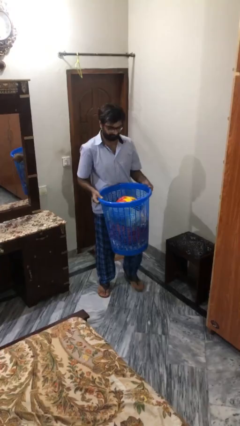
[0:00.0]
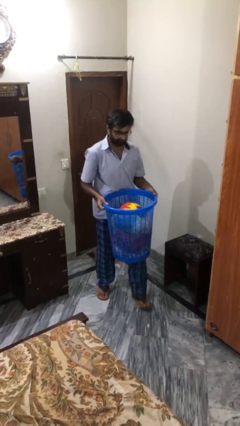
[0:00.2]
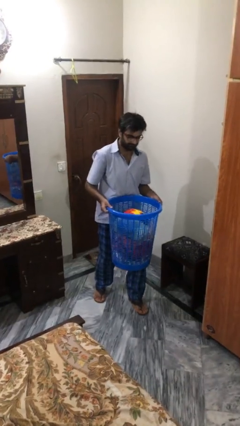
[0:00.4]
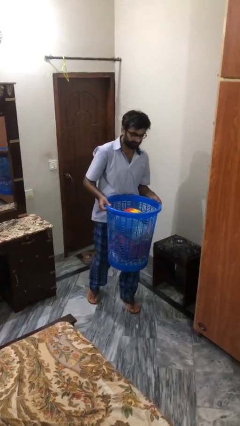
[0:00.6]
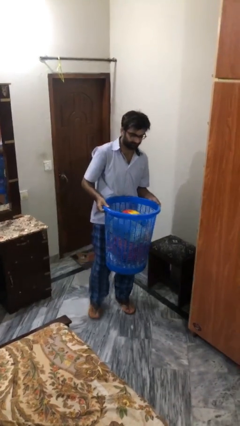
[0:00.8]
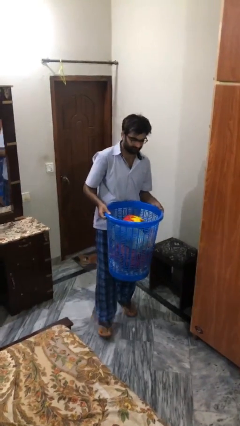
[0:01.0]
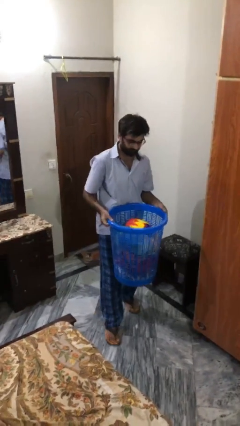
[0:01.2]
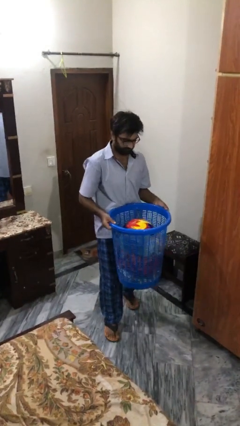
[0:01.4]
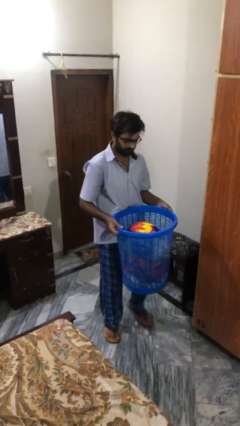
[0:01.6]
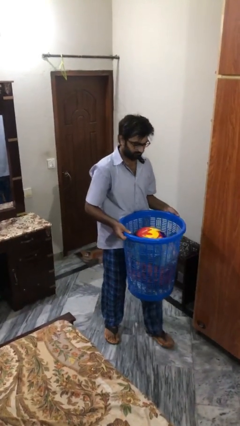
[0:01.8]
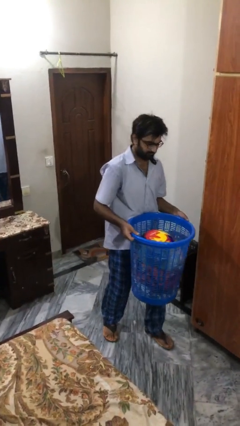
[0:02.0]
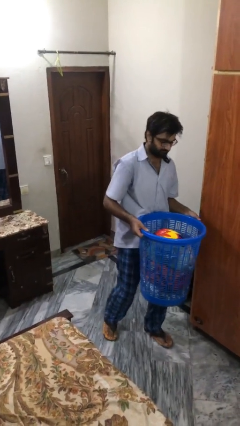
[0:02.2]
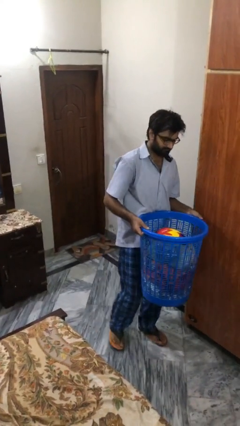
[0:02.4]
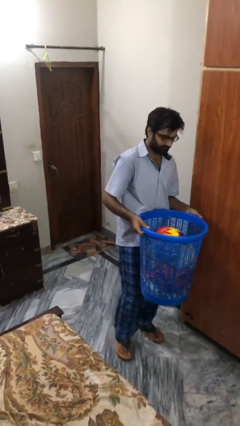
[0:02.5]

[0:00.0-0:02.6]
person carries heavy object

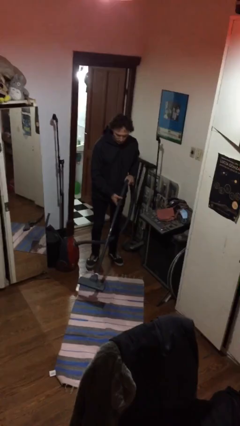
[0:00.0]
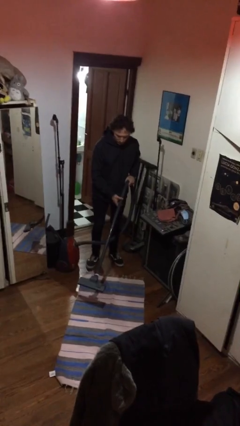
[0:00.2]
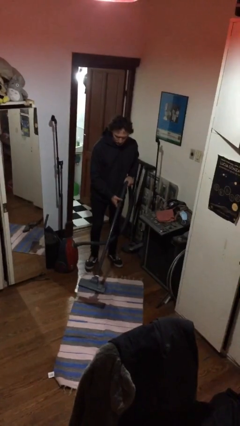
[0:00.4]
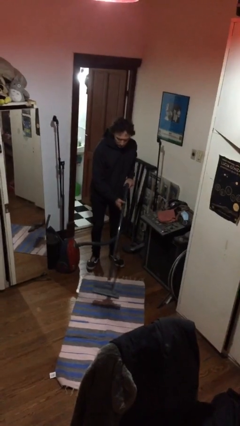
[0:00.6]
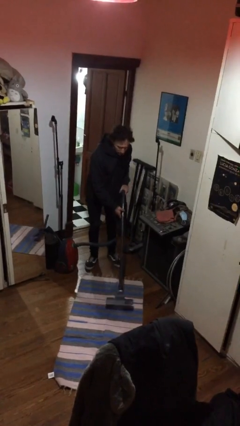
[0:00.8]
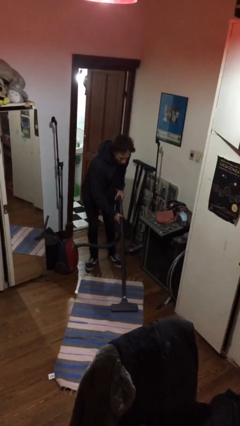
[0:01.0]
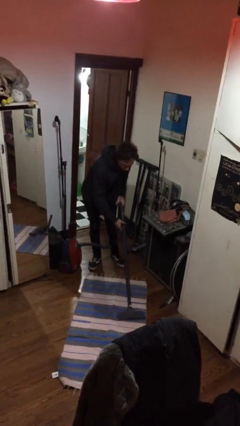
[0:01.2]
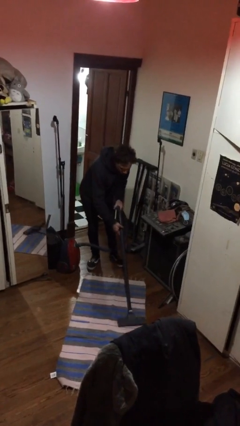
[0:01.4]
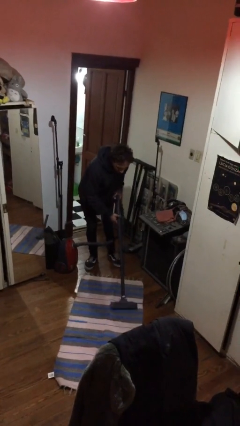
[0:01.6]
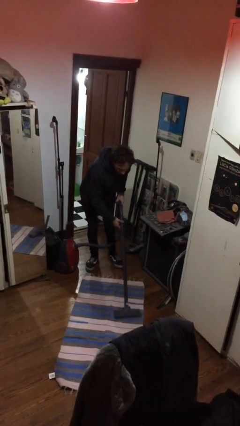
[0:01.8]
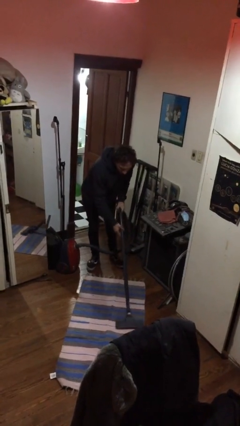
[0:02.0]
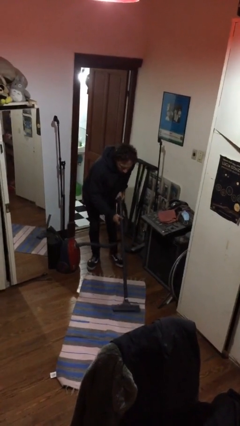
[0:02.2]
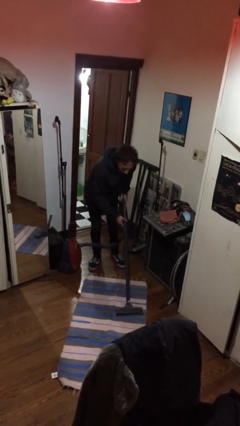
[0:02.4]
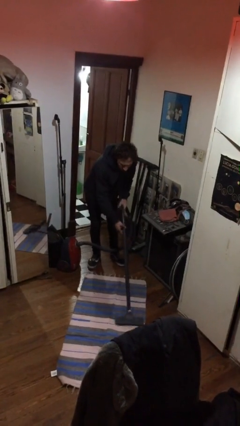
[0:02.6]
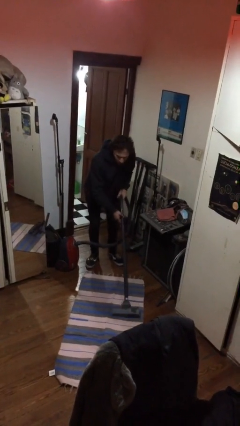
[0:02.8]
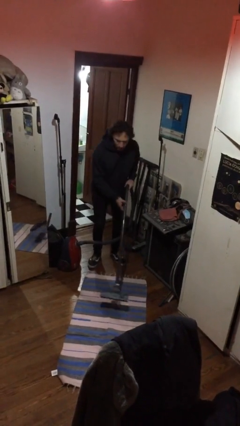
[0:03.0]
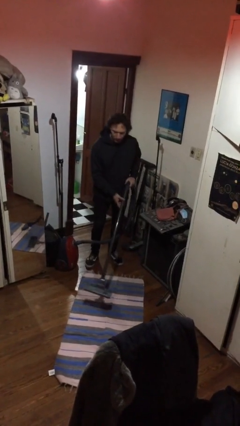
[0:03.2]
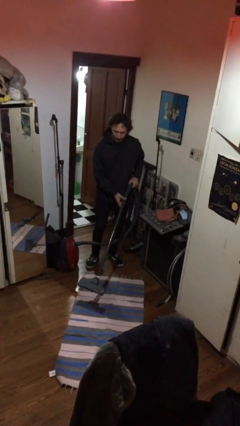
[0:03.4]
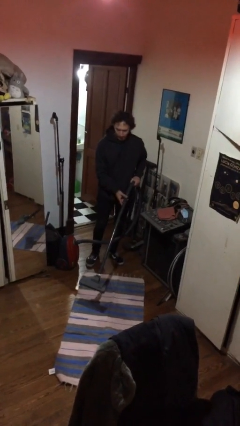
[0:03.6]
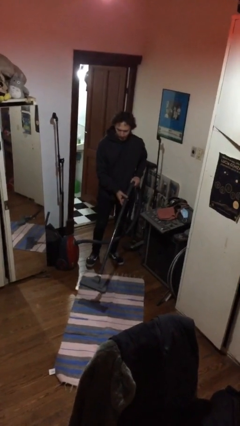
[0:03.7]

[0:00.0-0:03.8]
person vacuums carpet

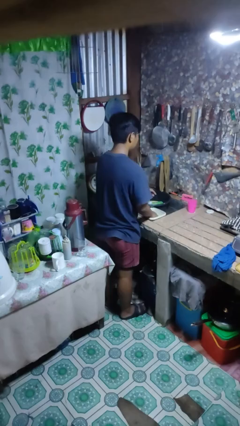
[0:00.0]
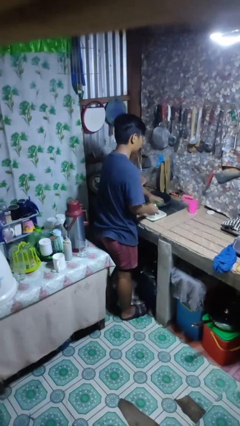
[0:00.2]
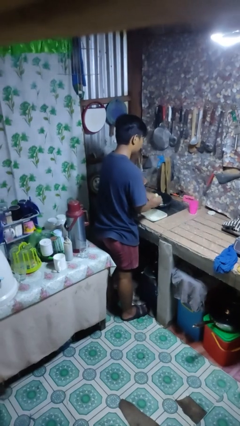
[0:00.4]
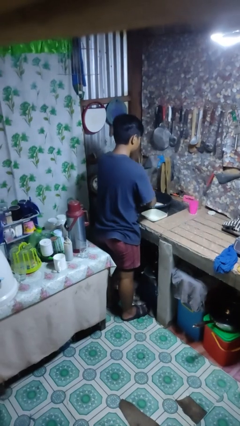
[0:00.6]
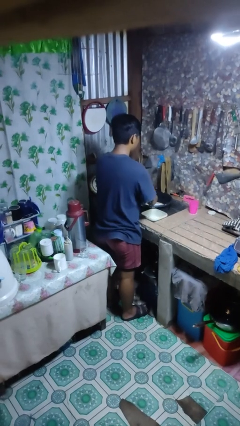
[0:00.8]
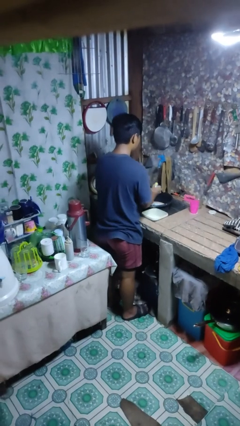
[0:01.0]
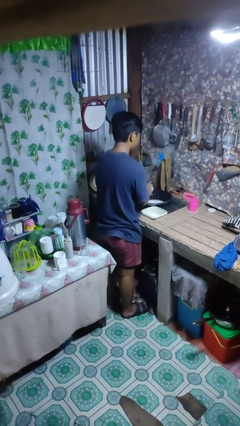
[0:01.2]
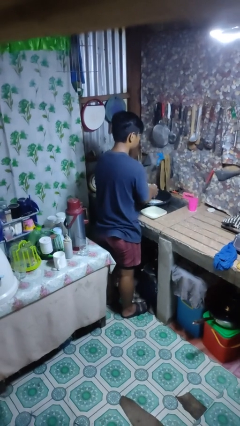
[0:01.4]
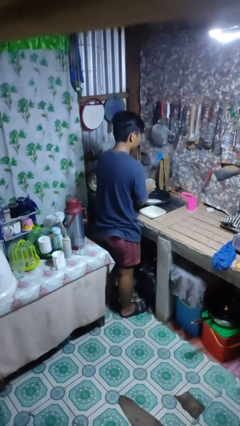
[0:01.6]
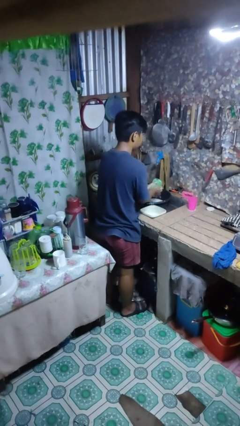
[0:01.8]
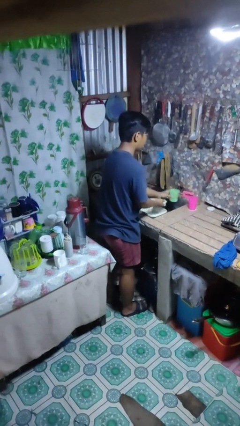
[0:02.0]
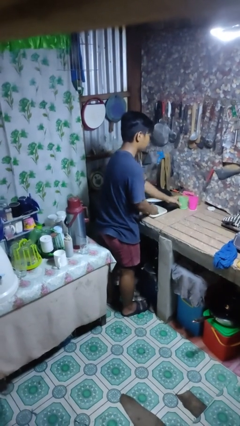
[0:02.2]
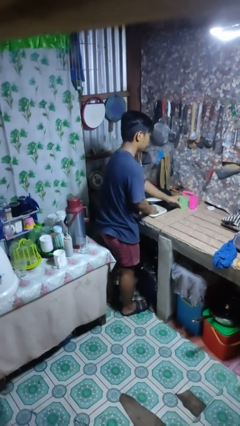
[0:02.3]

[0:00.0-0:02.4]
person washes dish

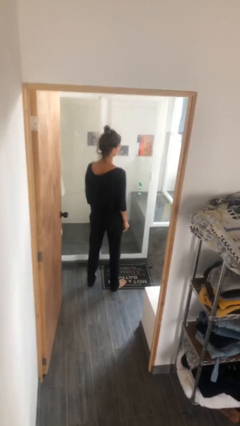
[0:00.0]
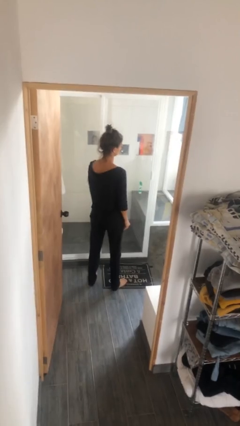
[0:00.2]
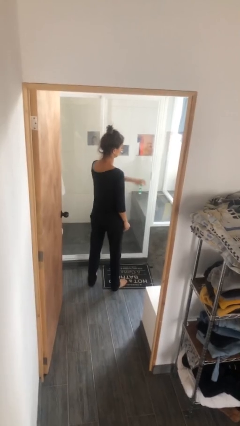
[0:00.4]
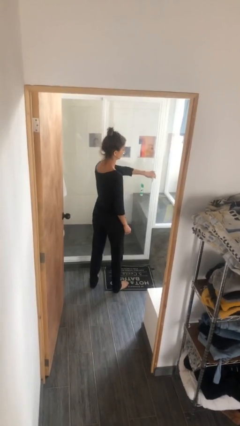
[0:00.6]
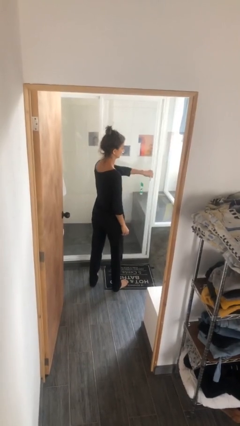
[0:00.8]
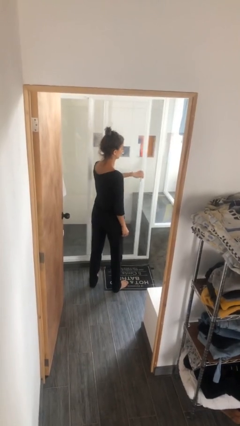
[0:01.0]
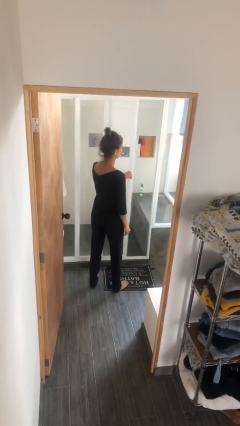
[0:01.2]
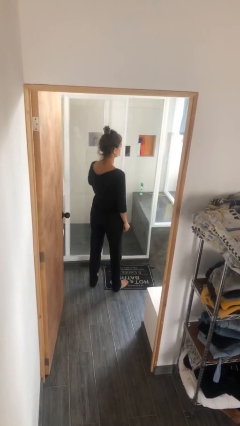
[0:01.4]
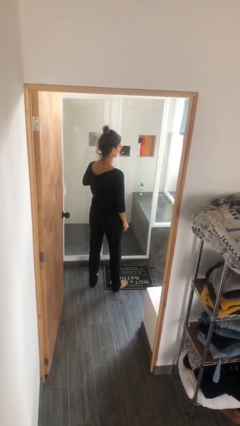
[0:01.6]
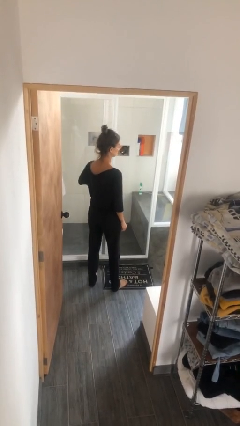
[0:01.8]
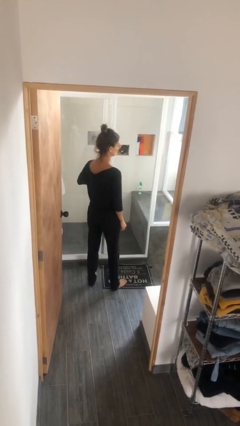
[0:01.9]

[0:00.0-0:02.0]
person opens sliding door

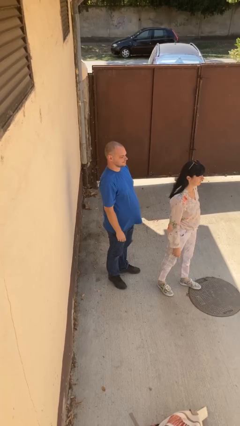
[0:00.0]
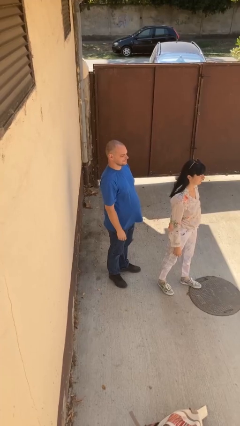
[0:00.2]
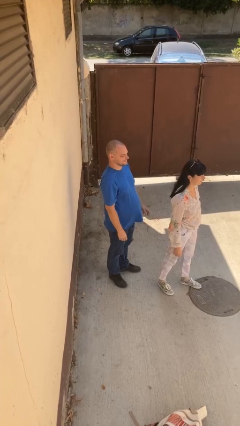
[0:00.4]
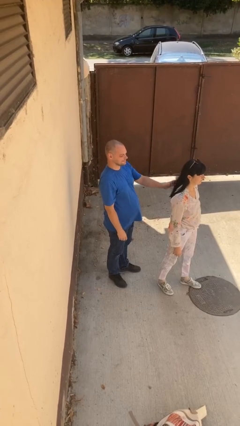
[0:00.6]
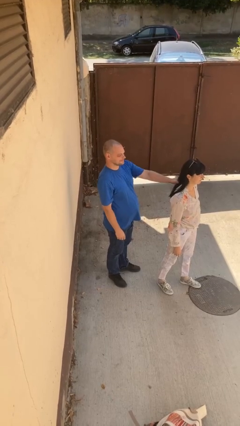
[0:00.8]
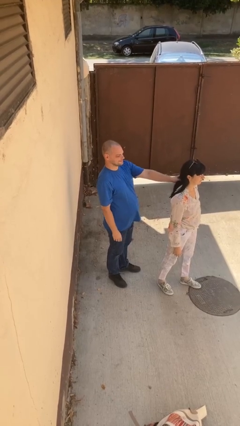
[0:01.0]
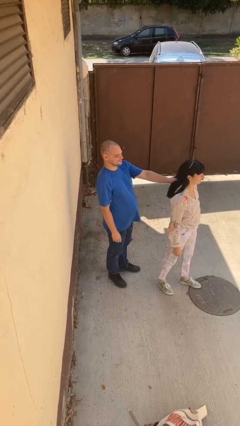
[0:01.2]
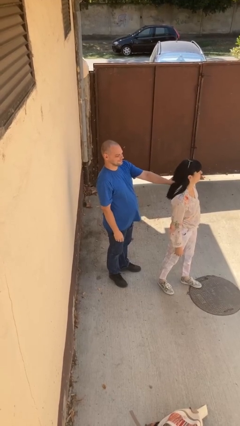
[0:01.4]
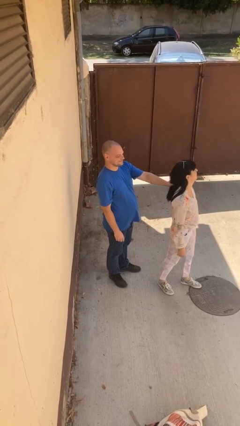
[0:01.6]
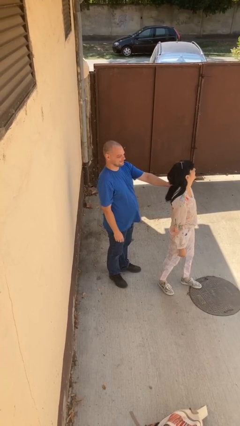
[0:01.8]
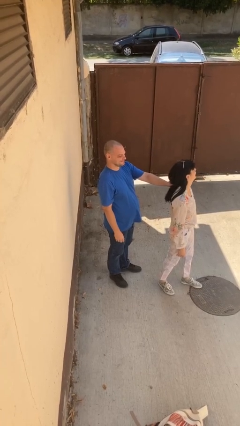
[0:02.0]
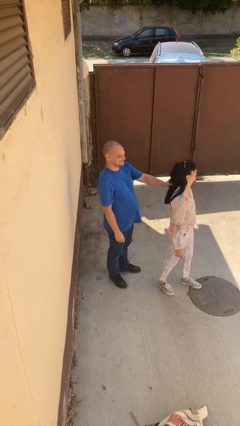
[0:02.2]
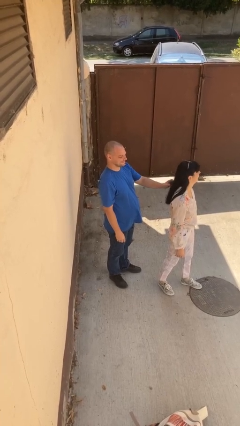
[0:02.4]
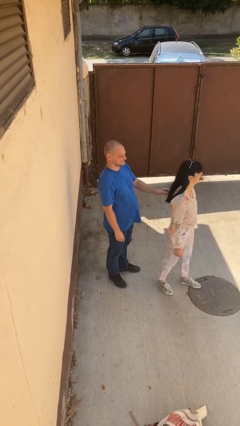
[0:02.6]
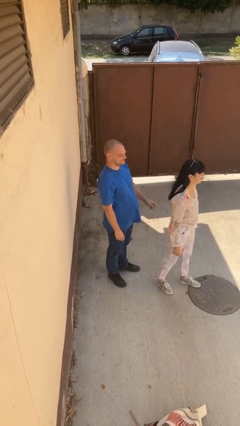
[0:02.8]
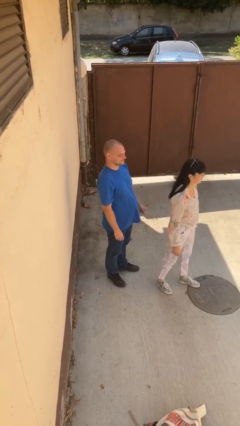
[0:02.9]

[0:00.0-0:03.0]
person grabs person by hair

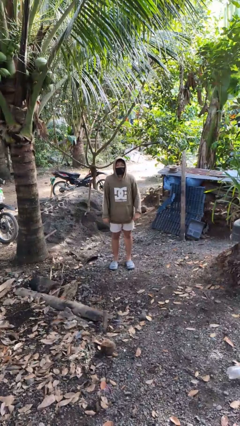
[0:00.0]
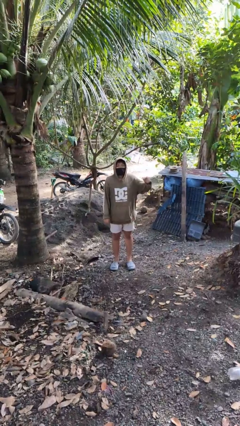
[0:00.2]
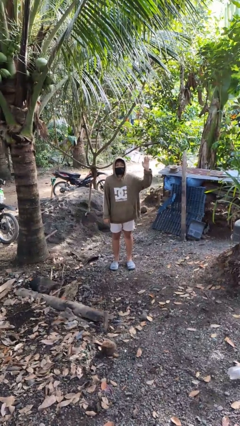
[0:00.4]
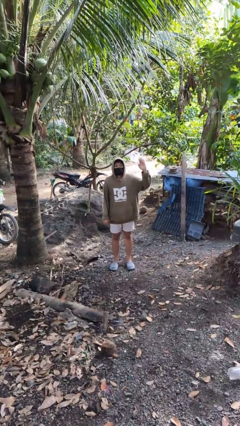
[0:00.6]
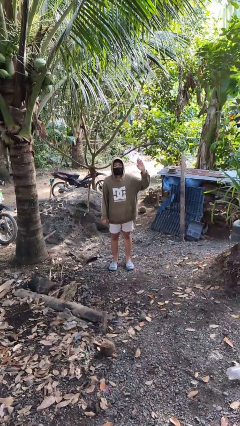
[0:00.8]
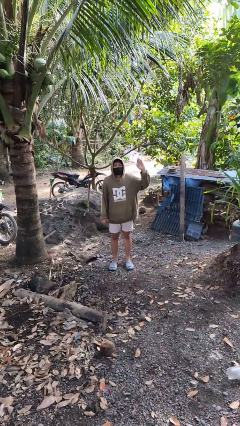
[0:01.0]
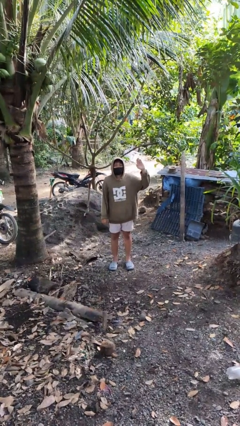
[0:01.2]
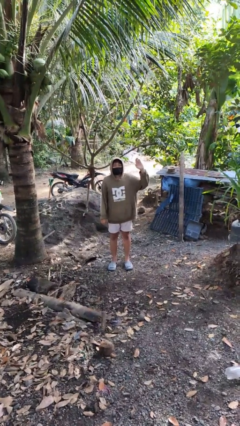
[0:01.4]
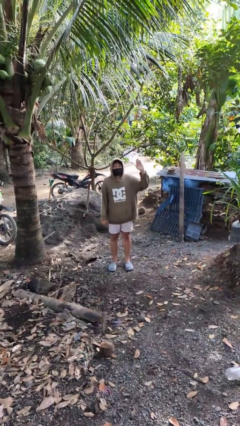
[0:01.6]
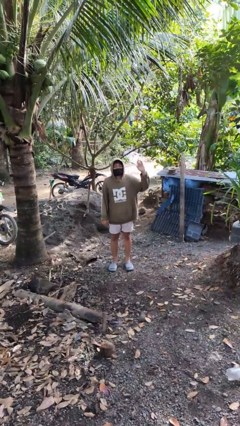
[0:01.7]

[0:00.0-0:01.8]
person gestures number five

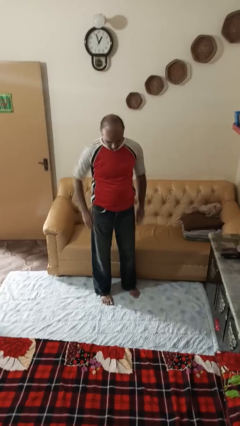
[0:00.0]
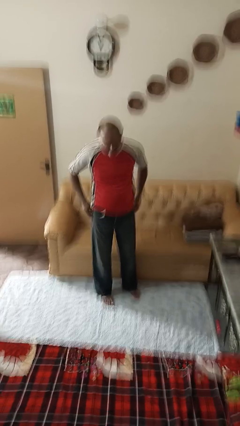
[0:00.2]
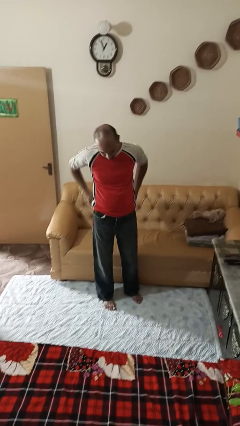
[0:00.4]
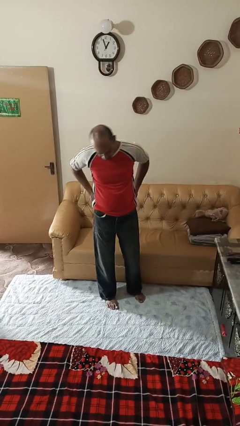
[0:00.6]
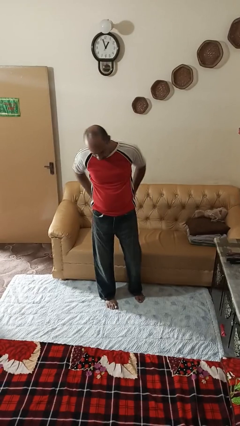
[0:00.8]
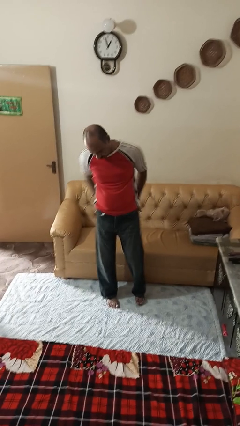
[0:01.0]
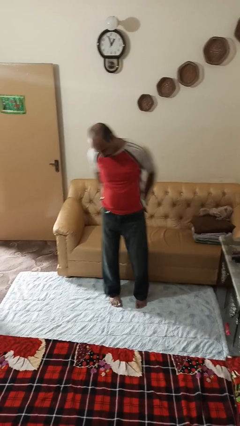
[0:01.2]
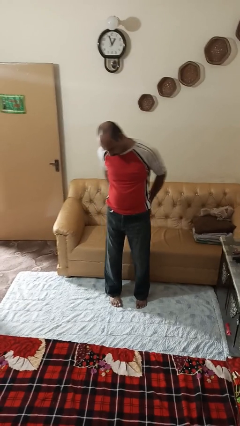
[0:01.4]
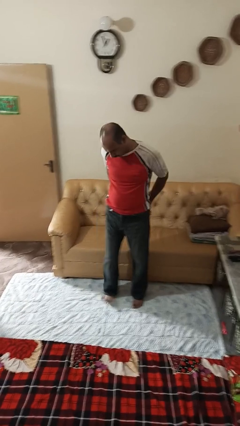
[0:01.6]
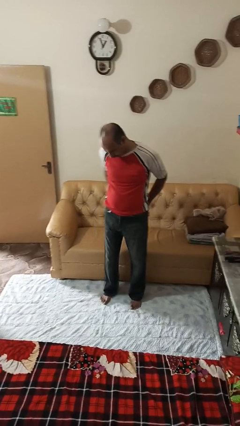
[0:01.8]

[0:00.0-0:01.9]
person puts hands in back pockets
